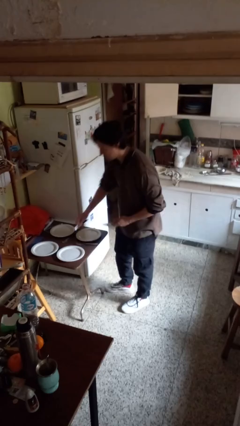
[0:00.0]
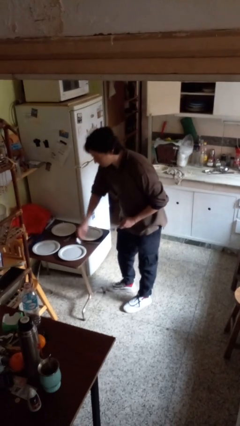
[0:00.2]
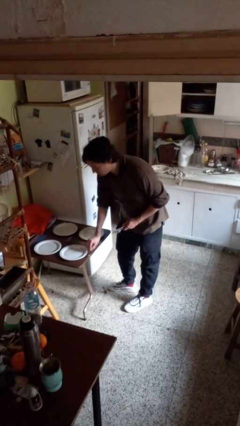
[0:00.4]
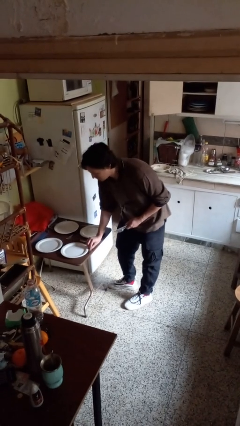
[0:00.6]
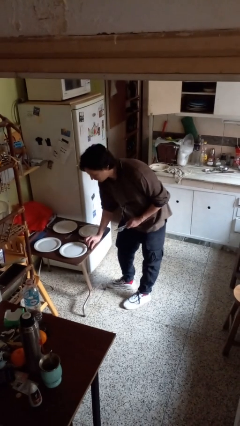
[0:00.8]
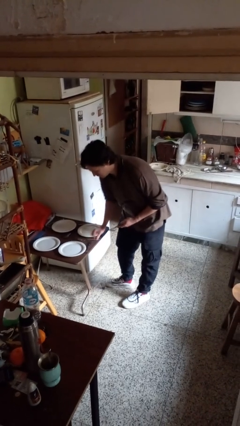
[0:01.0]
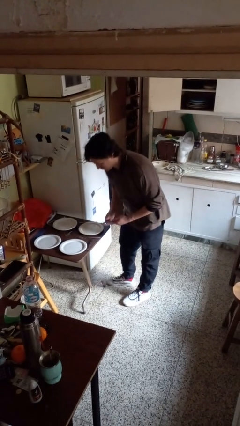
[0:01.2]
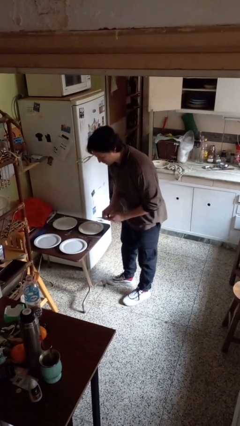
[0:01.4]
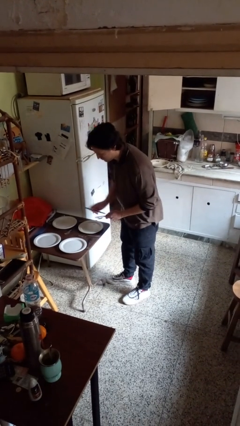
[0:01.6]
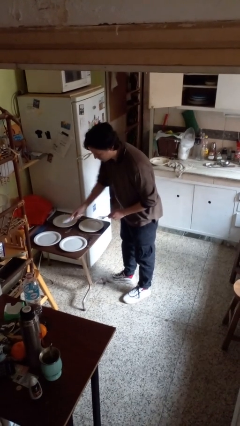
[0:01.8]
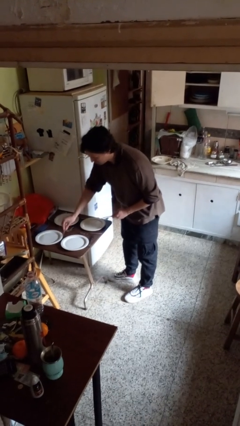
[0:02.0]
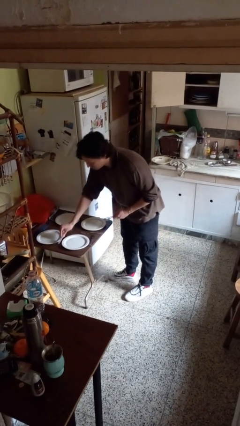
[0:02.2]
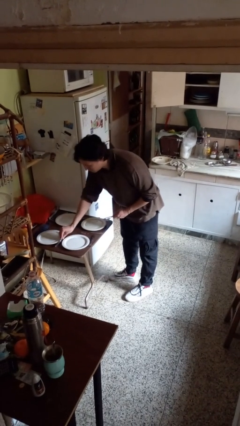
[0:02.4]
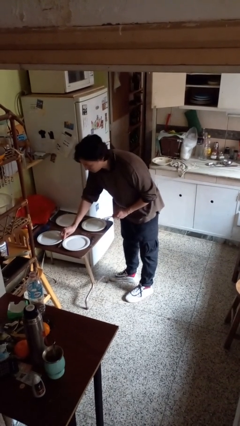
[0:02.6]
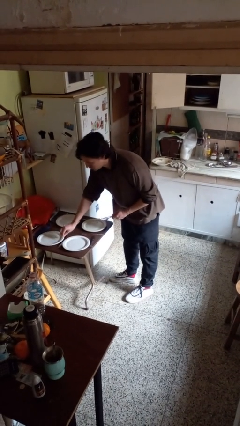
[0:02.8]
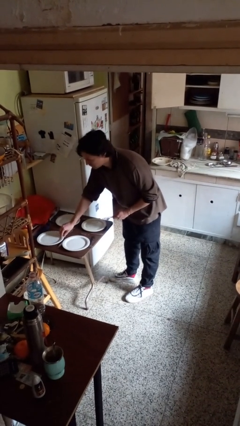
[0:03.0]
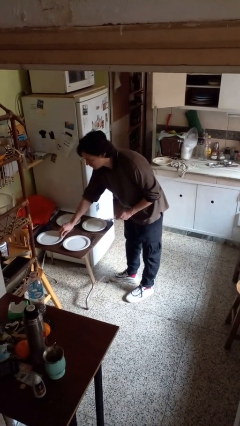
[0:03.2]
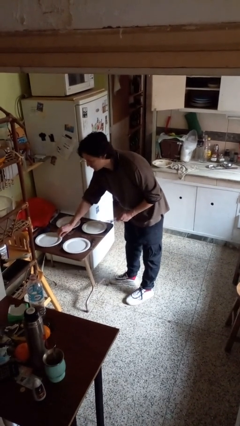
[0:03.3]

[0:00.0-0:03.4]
person sets table

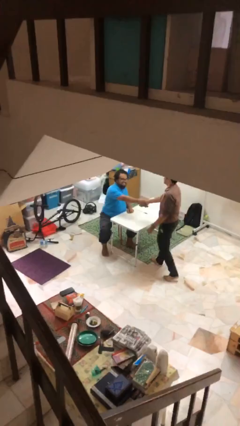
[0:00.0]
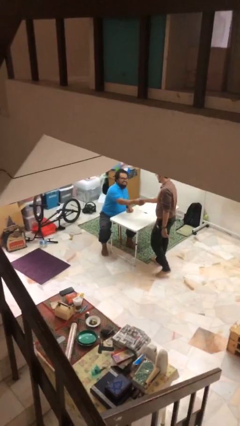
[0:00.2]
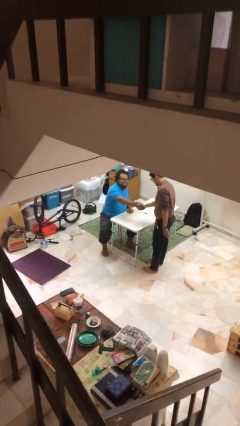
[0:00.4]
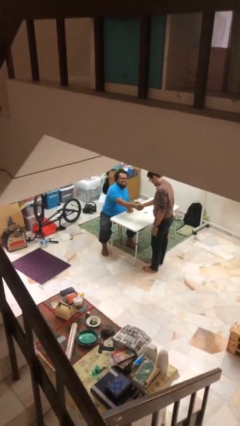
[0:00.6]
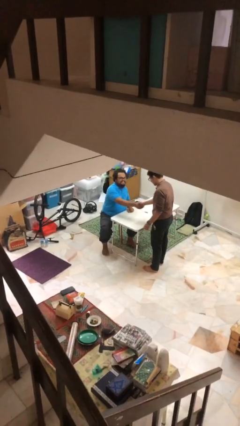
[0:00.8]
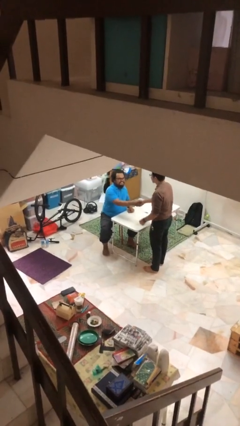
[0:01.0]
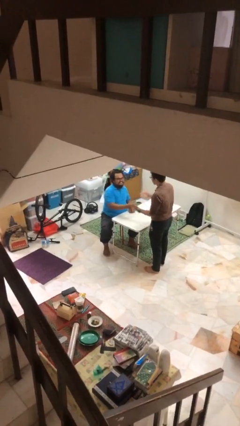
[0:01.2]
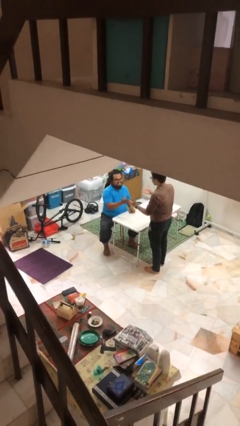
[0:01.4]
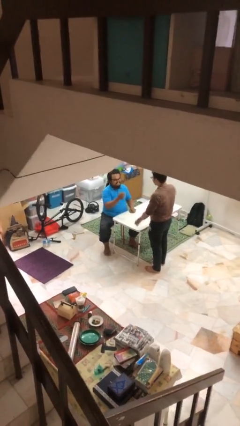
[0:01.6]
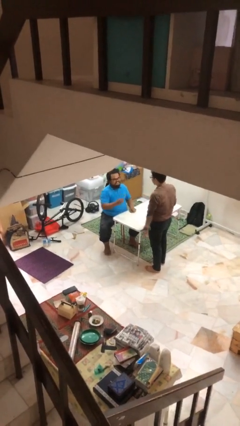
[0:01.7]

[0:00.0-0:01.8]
person shakes hand

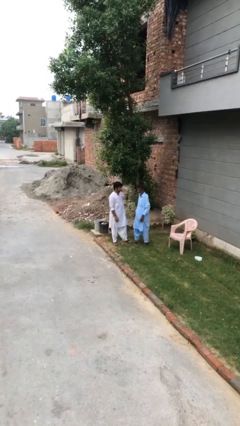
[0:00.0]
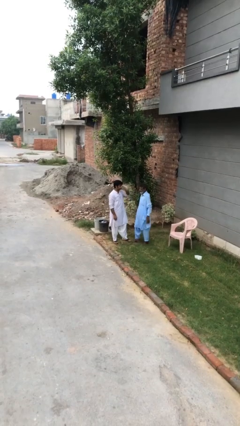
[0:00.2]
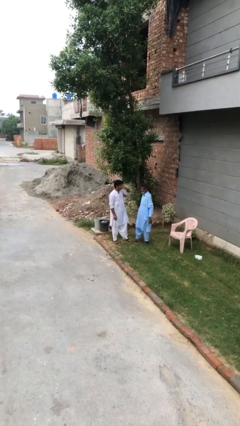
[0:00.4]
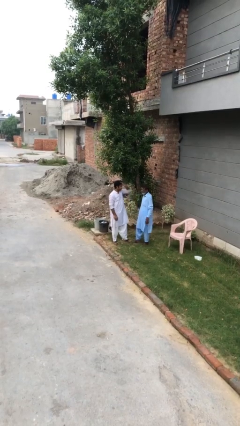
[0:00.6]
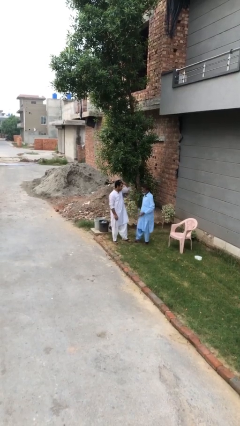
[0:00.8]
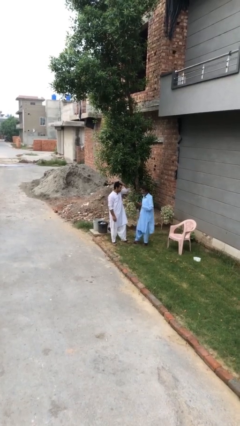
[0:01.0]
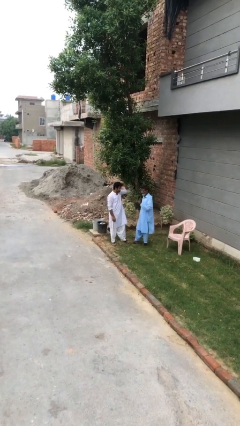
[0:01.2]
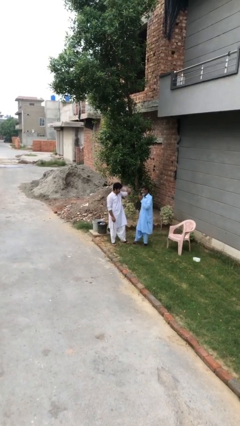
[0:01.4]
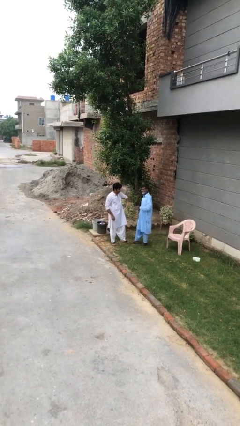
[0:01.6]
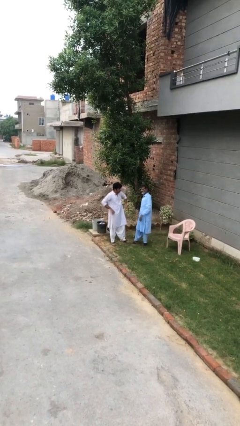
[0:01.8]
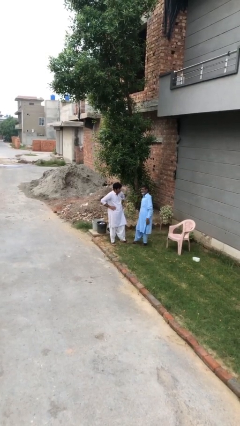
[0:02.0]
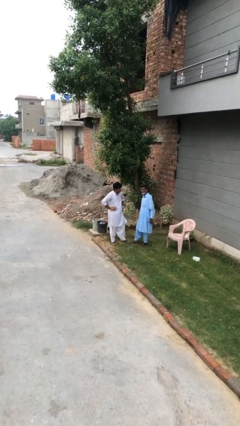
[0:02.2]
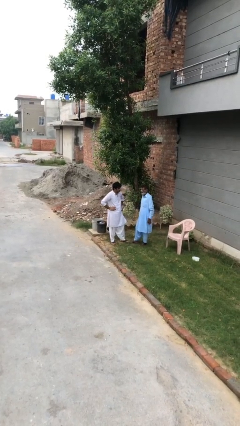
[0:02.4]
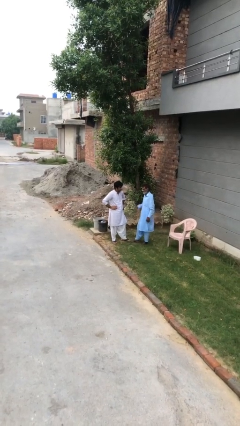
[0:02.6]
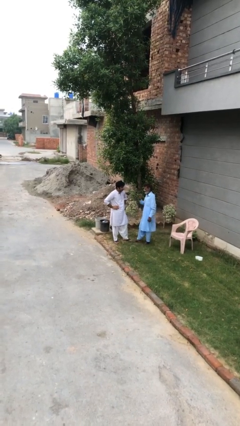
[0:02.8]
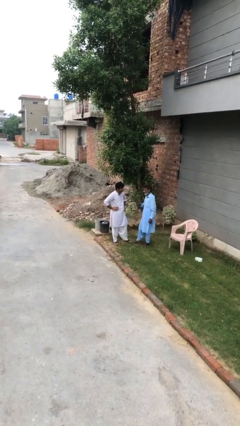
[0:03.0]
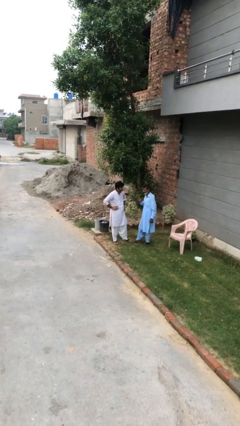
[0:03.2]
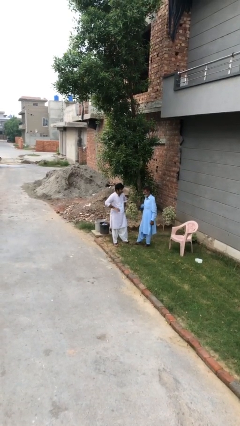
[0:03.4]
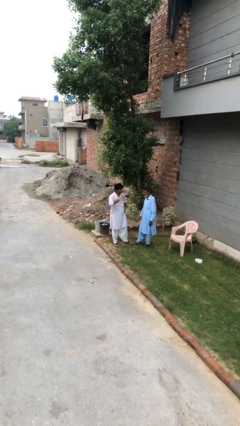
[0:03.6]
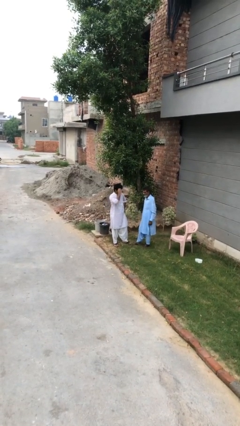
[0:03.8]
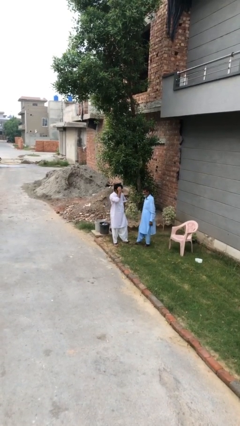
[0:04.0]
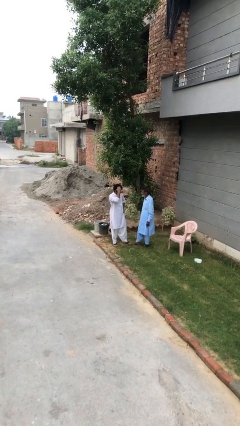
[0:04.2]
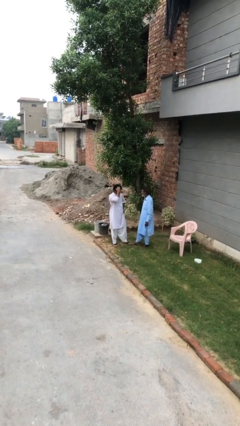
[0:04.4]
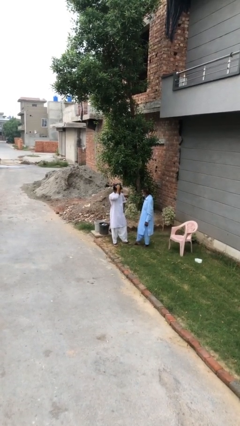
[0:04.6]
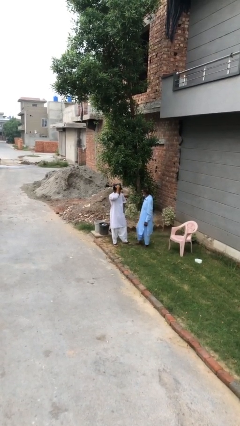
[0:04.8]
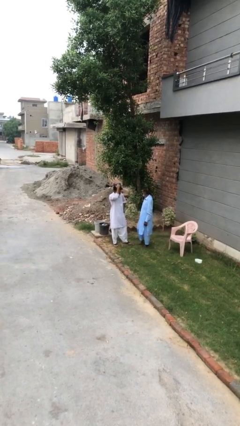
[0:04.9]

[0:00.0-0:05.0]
person talks to person

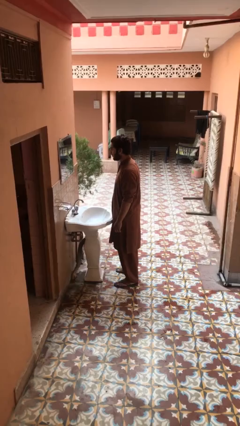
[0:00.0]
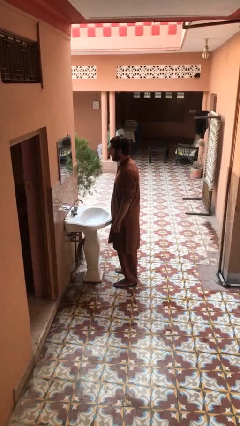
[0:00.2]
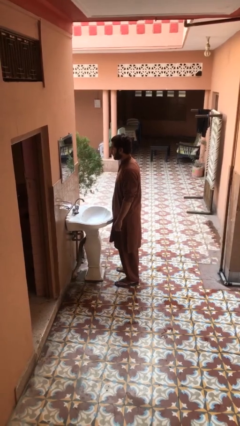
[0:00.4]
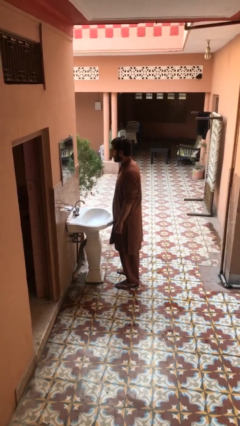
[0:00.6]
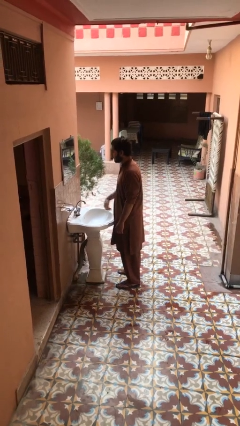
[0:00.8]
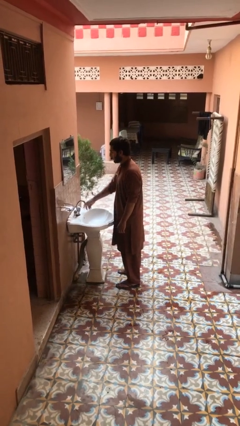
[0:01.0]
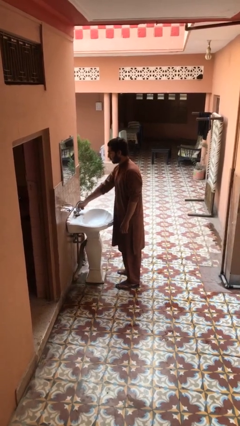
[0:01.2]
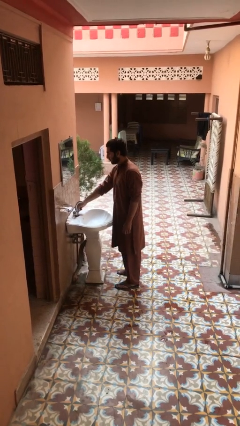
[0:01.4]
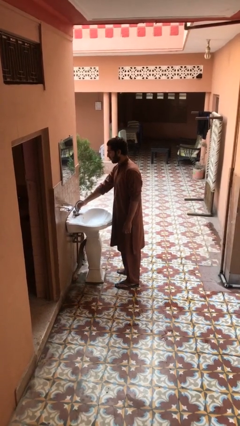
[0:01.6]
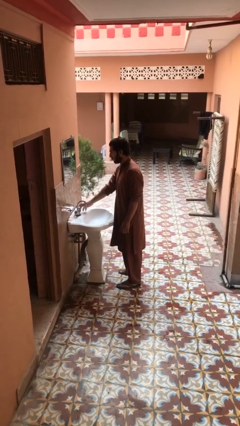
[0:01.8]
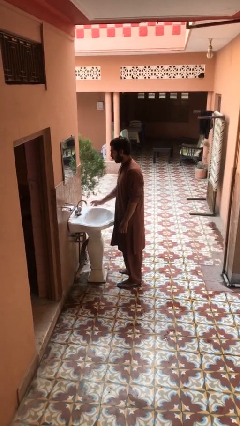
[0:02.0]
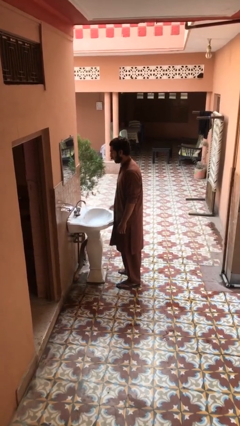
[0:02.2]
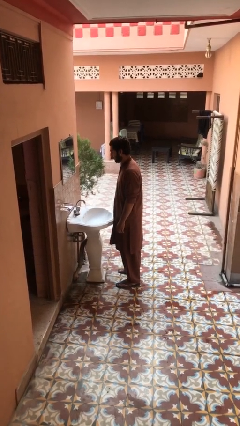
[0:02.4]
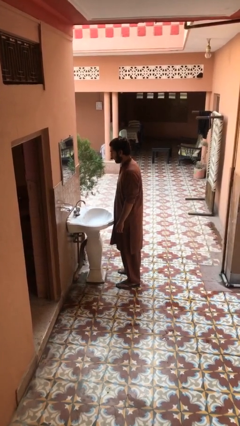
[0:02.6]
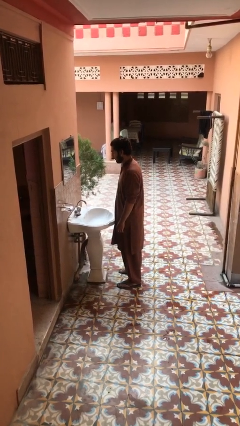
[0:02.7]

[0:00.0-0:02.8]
person turns on faucet

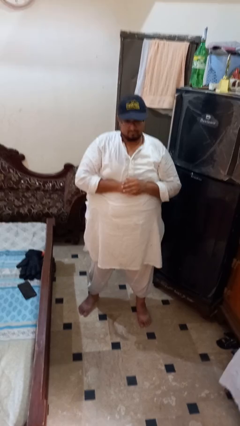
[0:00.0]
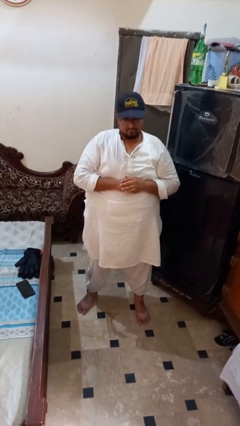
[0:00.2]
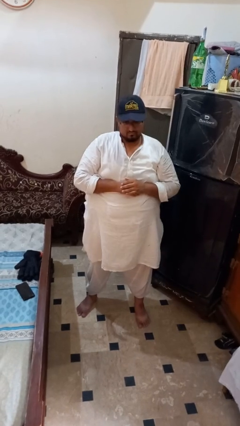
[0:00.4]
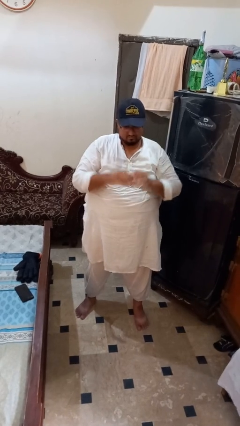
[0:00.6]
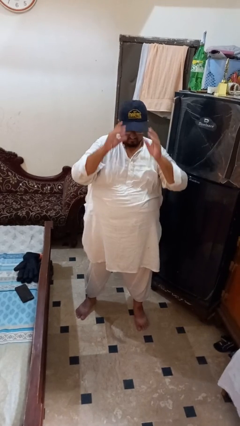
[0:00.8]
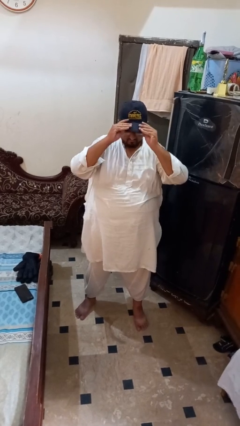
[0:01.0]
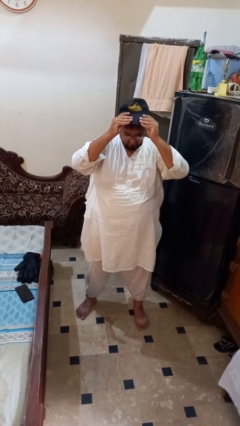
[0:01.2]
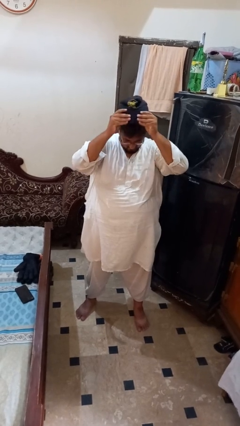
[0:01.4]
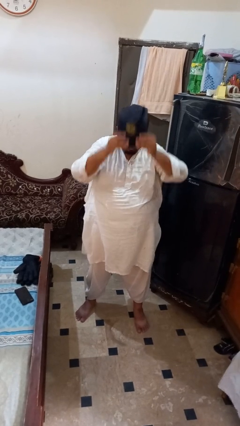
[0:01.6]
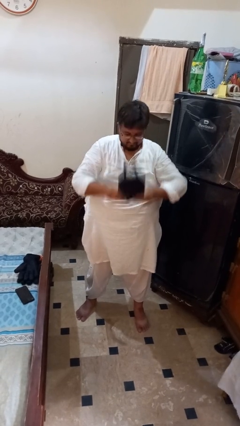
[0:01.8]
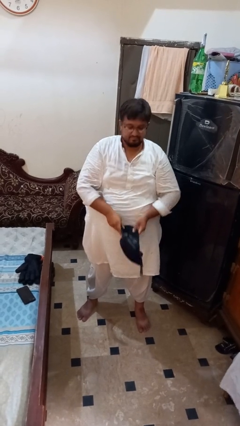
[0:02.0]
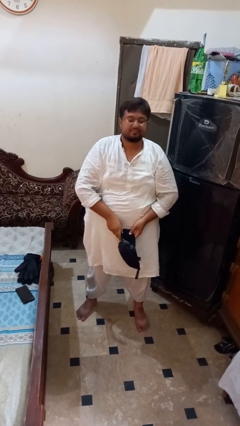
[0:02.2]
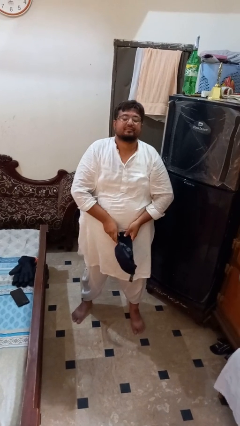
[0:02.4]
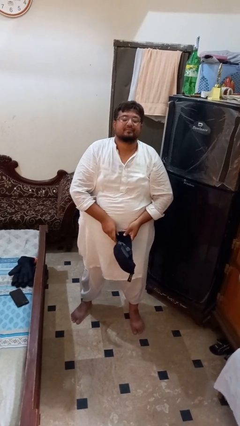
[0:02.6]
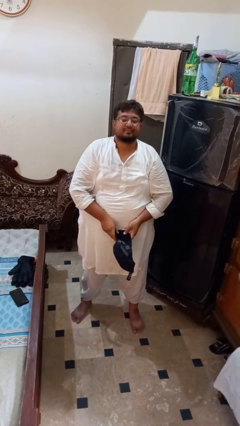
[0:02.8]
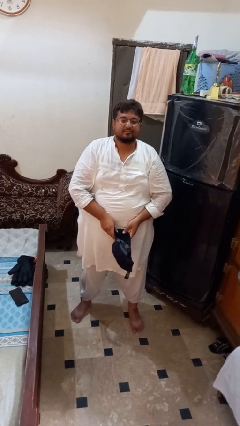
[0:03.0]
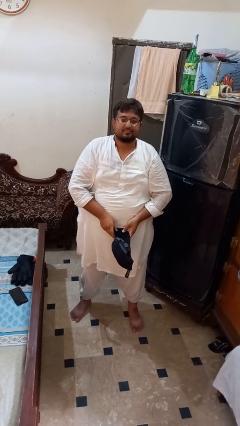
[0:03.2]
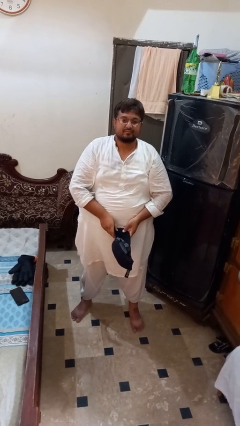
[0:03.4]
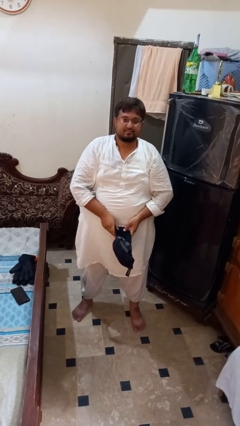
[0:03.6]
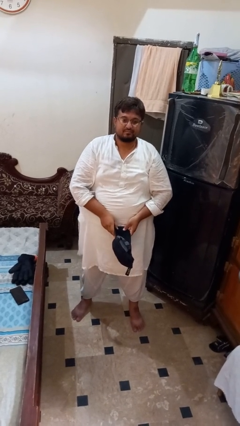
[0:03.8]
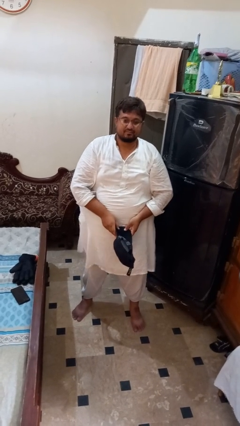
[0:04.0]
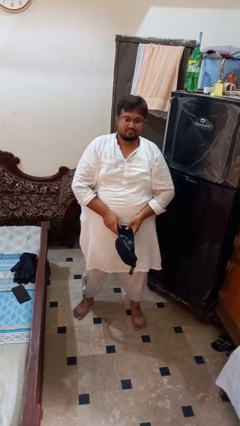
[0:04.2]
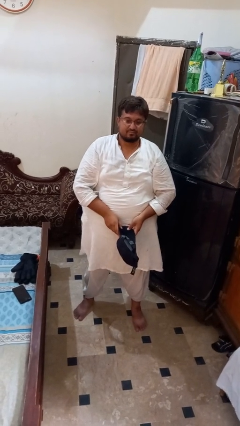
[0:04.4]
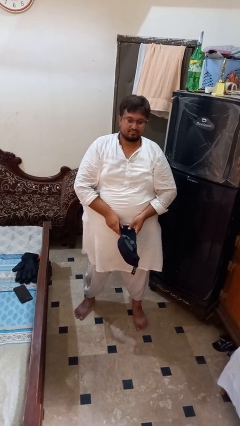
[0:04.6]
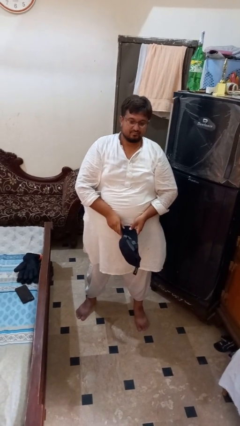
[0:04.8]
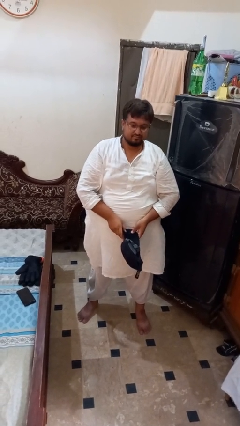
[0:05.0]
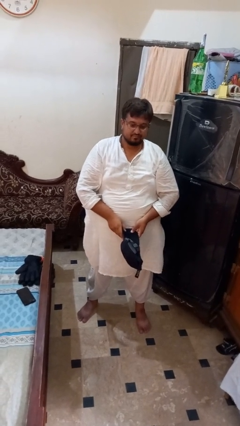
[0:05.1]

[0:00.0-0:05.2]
person takes off hat
